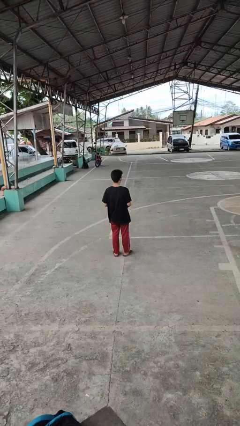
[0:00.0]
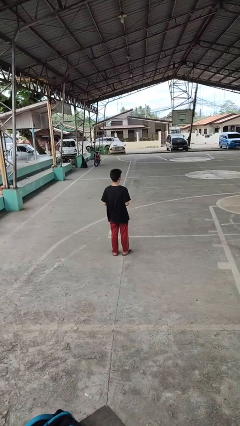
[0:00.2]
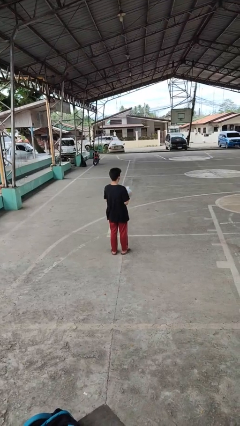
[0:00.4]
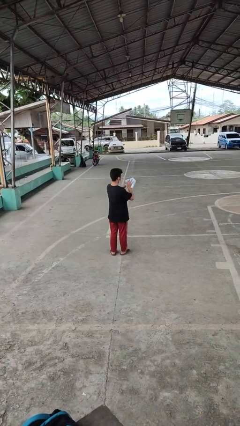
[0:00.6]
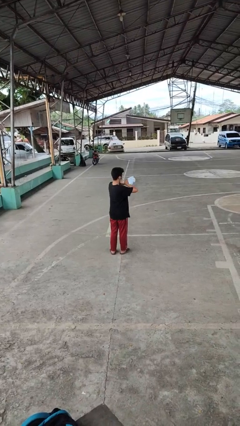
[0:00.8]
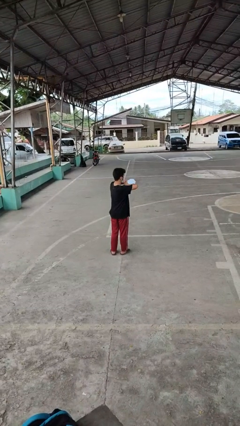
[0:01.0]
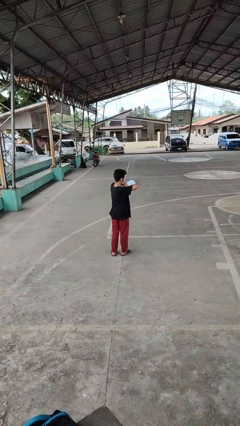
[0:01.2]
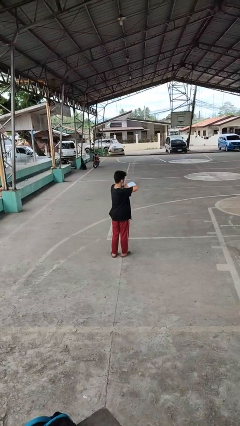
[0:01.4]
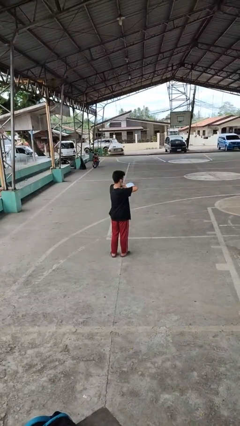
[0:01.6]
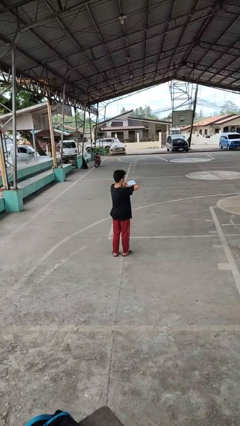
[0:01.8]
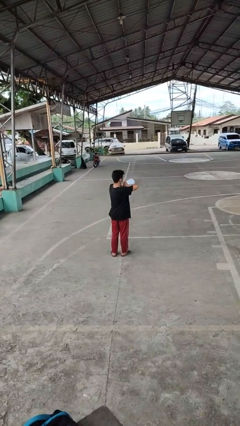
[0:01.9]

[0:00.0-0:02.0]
person squeezes object

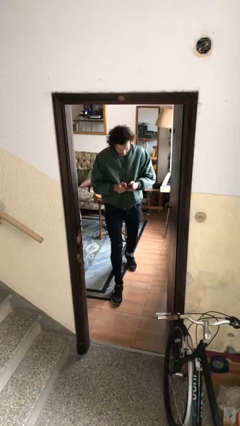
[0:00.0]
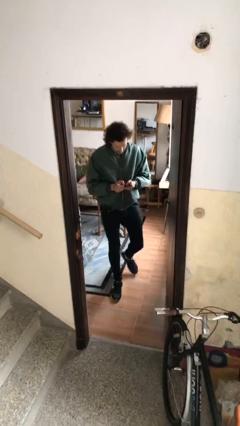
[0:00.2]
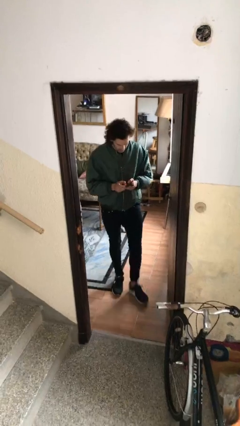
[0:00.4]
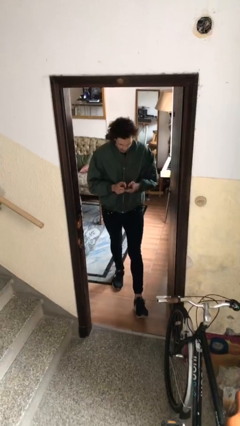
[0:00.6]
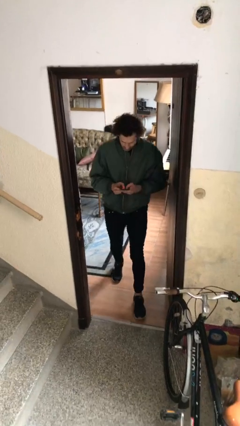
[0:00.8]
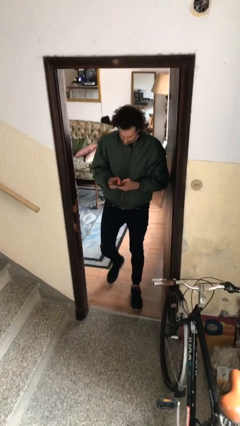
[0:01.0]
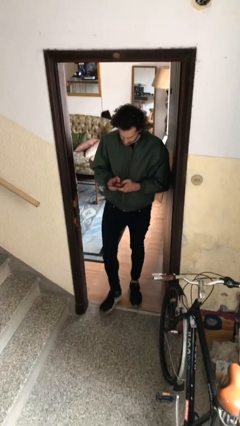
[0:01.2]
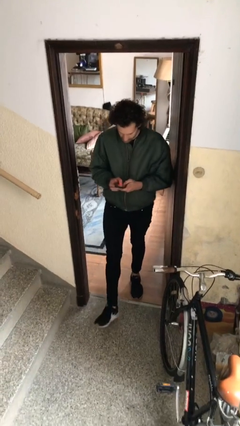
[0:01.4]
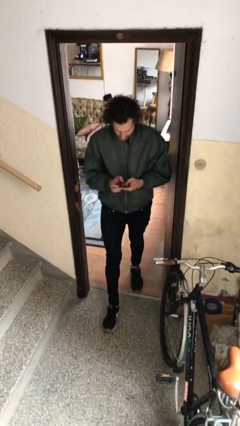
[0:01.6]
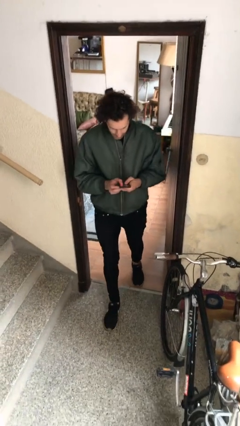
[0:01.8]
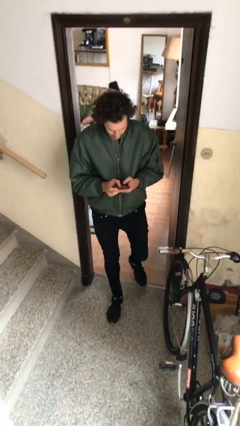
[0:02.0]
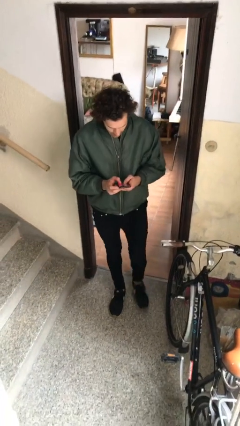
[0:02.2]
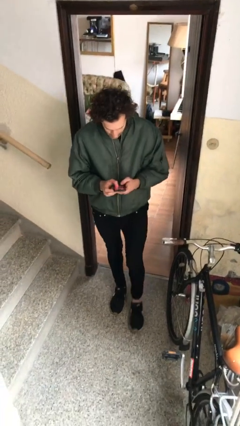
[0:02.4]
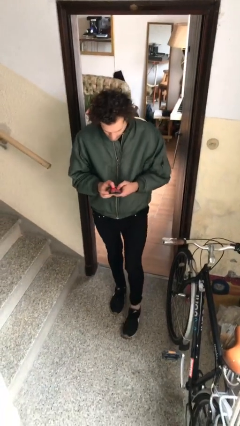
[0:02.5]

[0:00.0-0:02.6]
person texts on phone

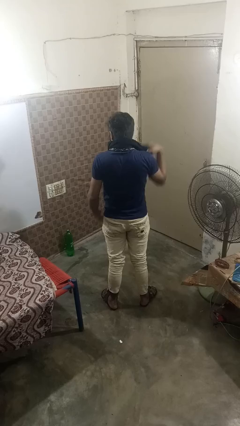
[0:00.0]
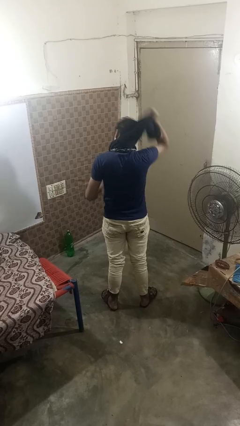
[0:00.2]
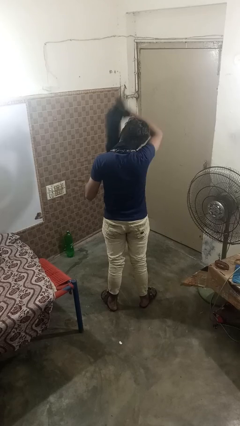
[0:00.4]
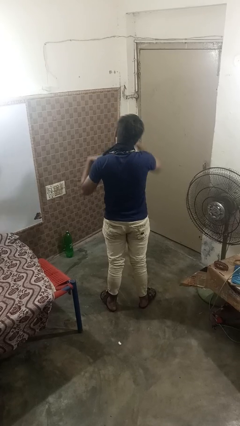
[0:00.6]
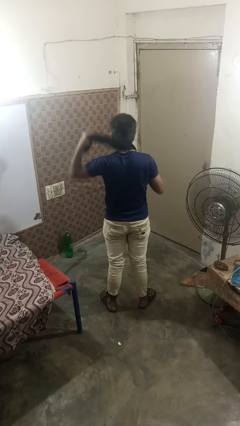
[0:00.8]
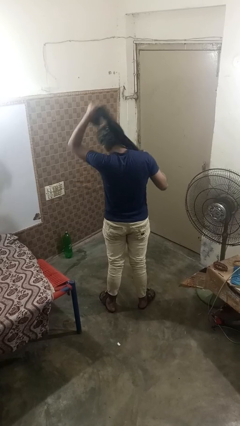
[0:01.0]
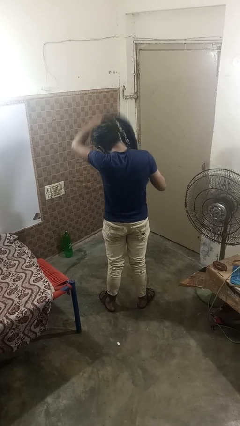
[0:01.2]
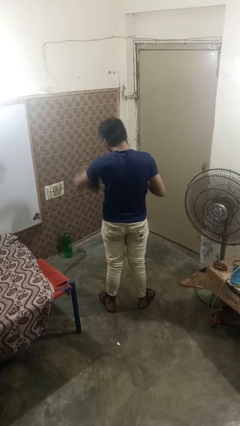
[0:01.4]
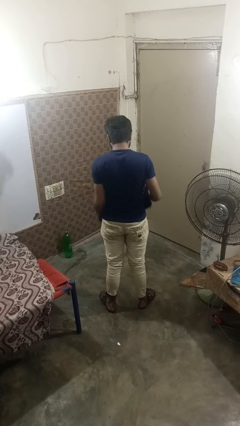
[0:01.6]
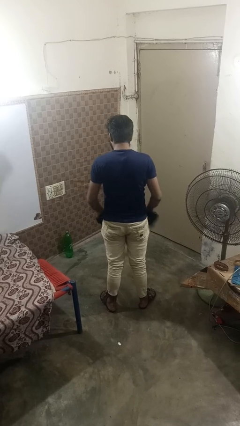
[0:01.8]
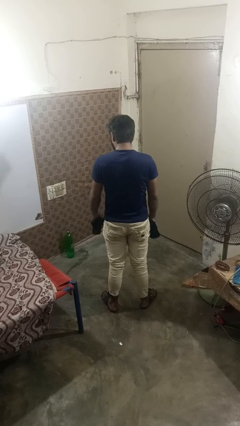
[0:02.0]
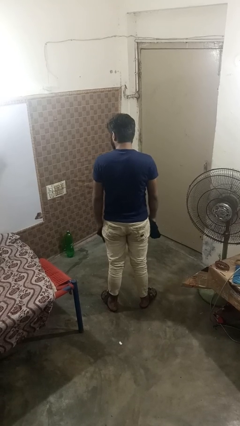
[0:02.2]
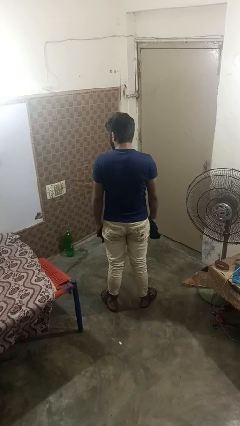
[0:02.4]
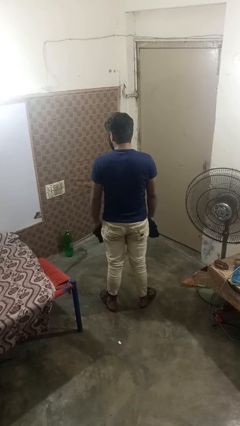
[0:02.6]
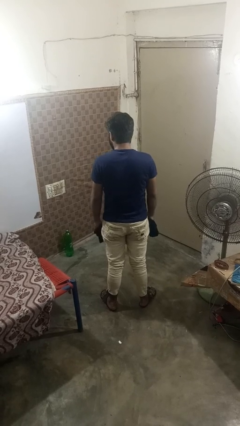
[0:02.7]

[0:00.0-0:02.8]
person takes off scarf

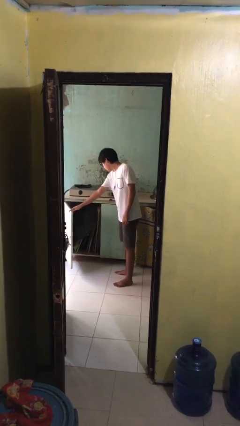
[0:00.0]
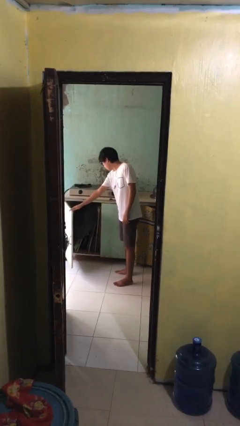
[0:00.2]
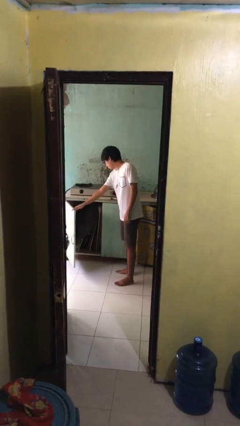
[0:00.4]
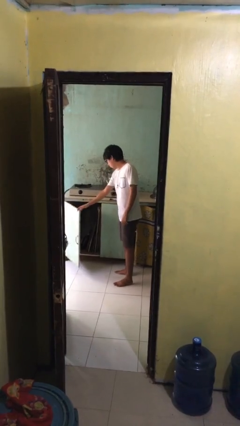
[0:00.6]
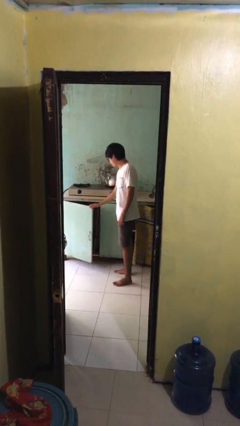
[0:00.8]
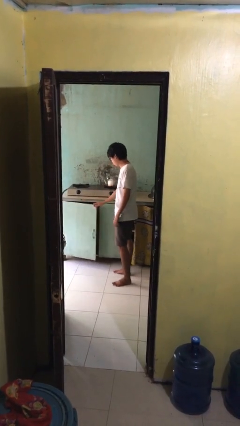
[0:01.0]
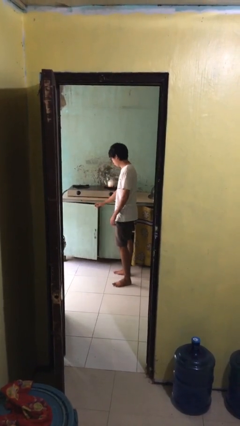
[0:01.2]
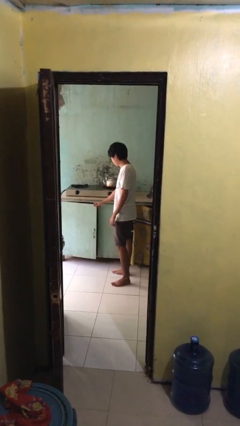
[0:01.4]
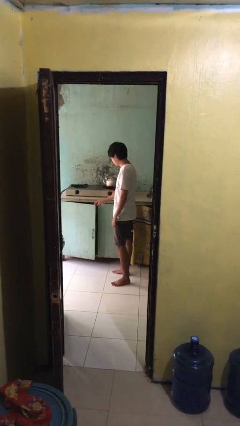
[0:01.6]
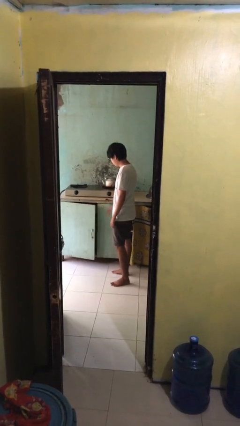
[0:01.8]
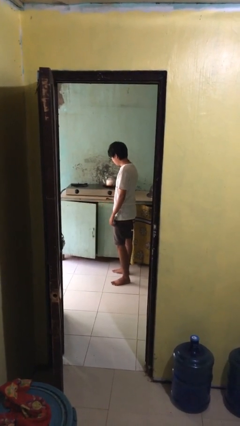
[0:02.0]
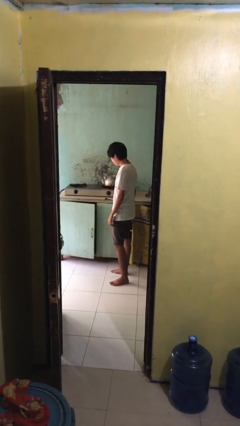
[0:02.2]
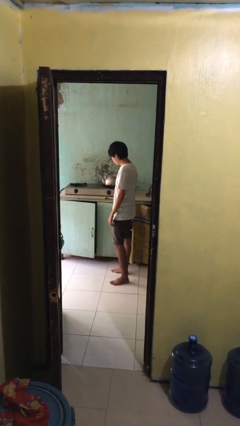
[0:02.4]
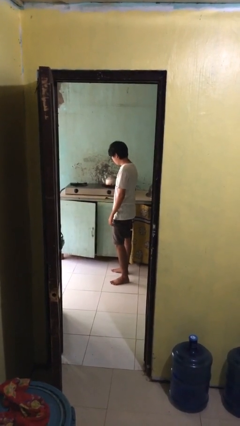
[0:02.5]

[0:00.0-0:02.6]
person closes cabinet

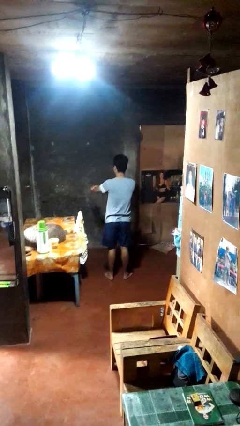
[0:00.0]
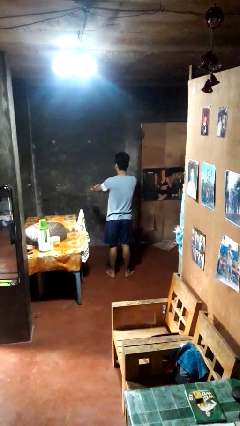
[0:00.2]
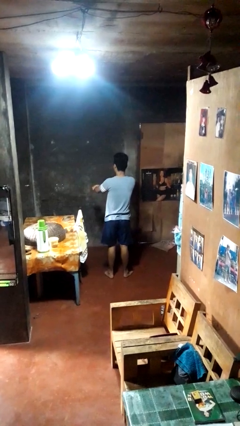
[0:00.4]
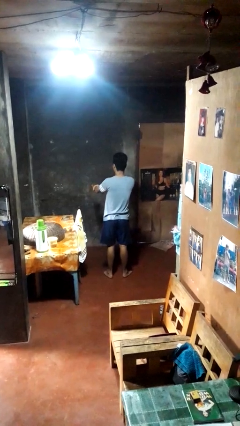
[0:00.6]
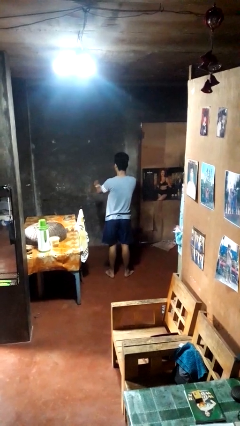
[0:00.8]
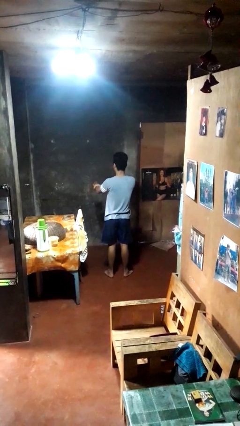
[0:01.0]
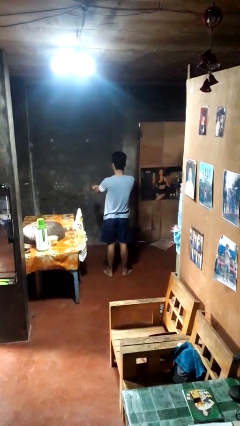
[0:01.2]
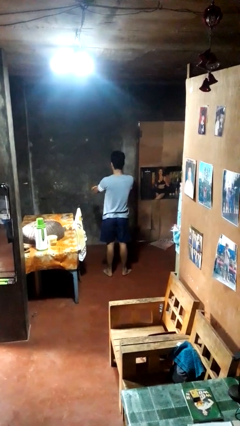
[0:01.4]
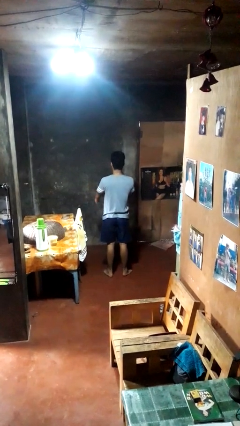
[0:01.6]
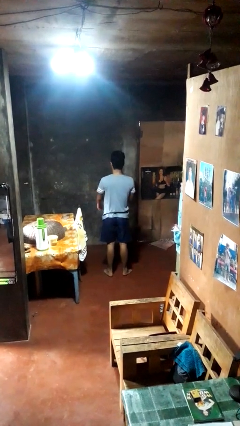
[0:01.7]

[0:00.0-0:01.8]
person swats bug

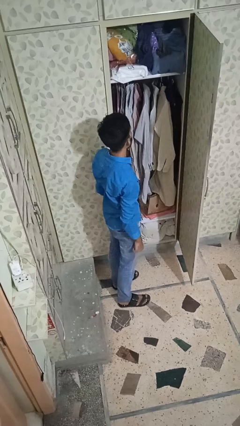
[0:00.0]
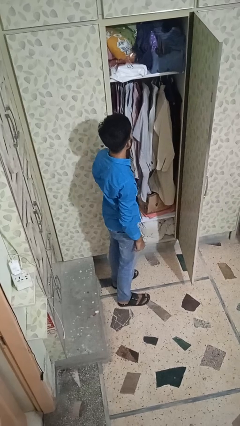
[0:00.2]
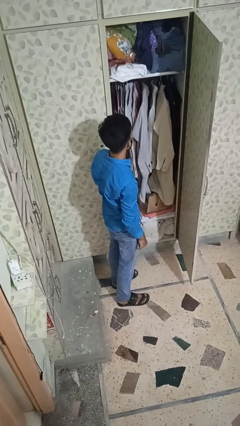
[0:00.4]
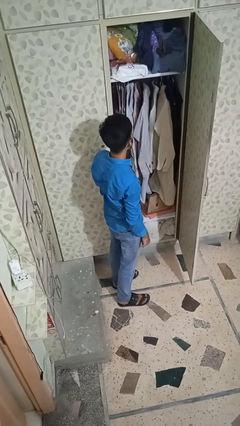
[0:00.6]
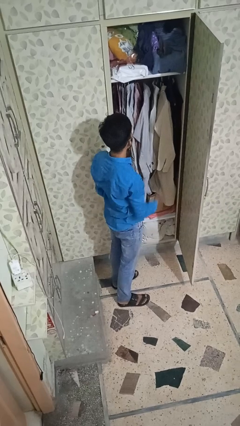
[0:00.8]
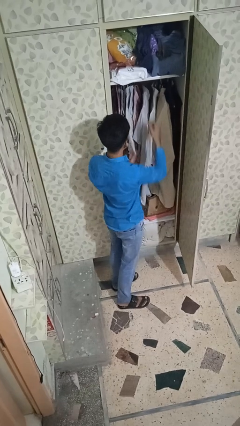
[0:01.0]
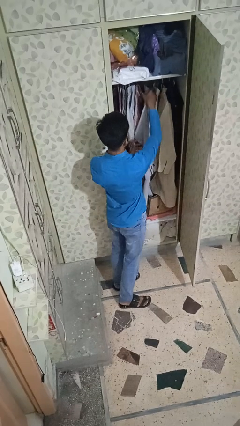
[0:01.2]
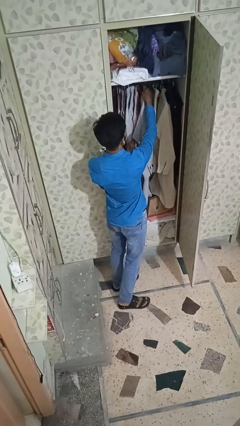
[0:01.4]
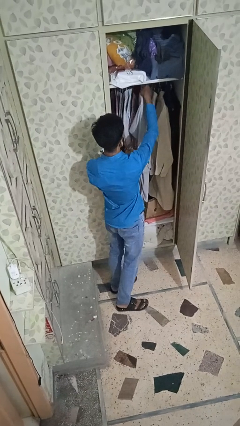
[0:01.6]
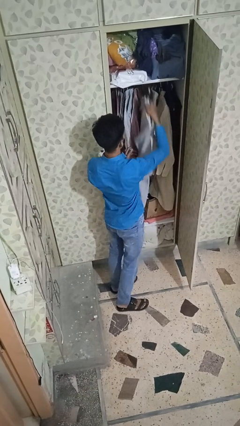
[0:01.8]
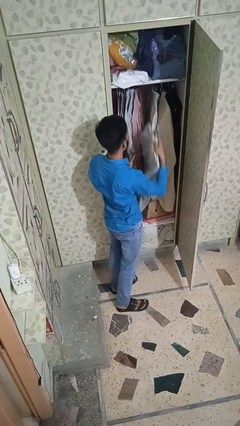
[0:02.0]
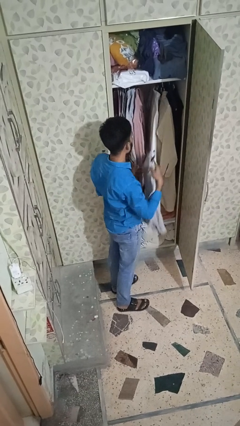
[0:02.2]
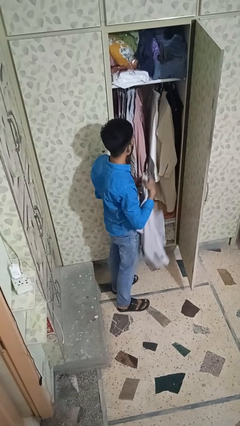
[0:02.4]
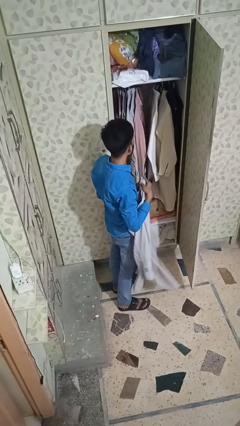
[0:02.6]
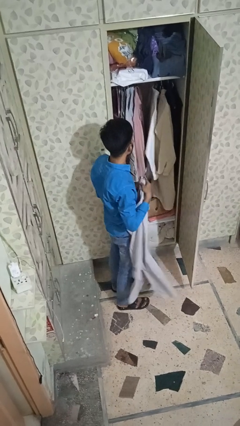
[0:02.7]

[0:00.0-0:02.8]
person takes clothes from closet

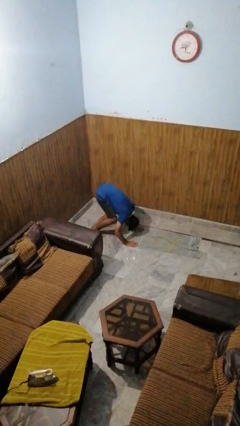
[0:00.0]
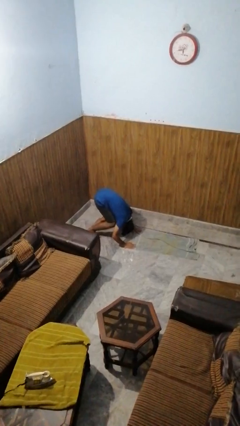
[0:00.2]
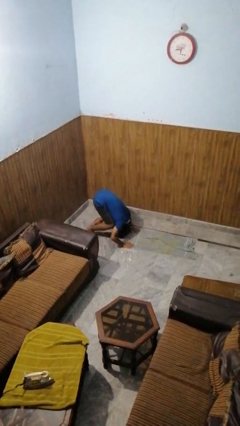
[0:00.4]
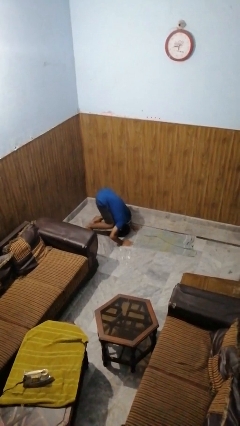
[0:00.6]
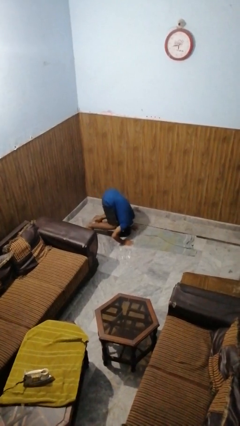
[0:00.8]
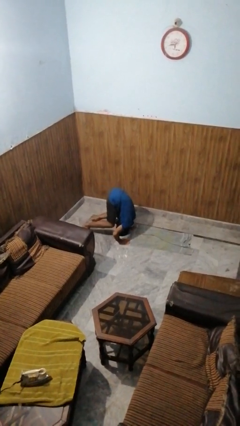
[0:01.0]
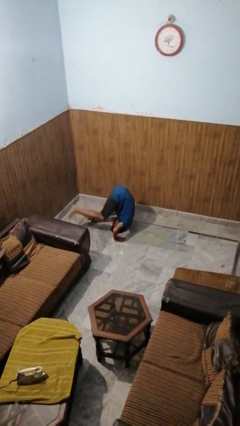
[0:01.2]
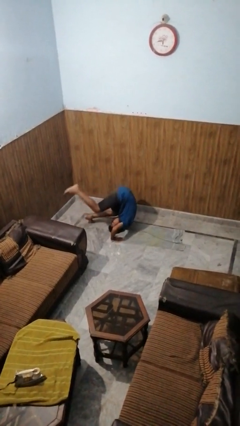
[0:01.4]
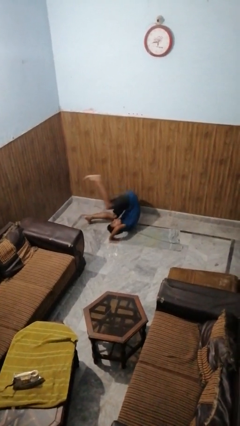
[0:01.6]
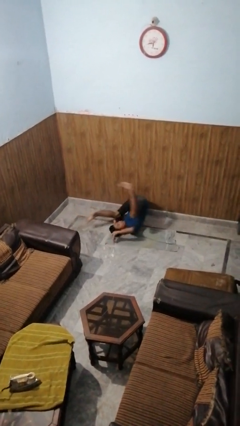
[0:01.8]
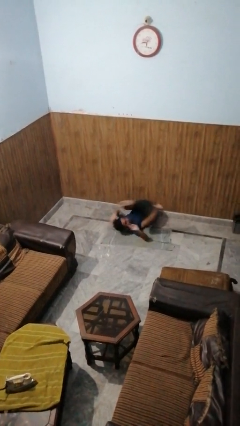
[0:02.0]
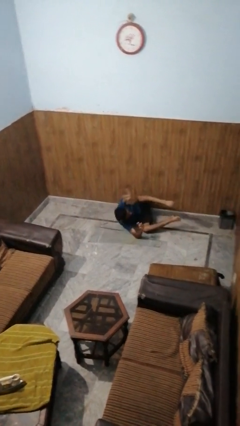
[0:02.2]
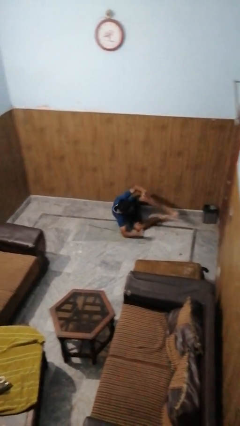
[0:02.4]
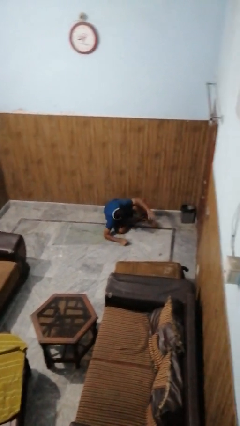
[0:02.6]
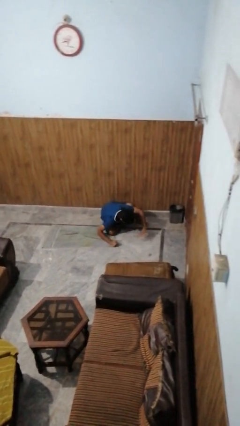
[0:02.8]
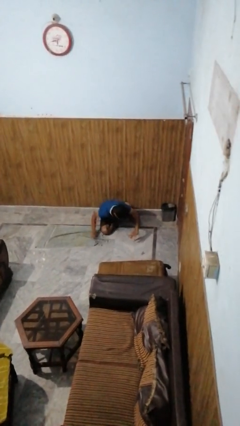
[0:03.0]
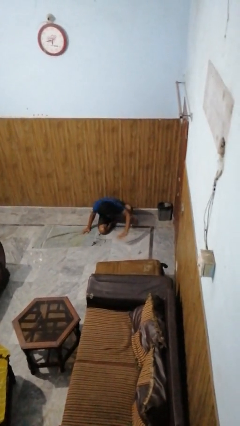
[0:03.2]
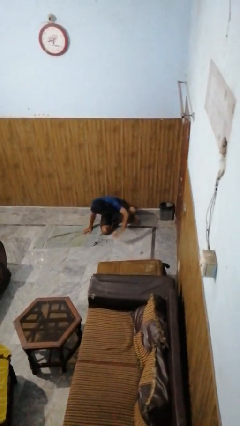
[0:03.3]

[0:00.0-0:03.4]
person somersaults
